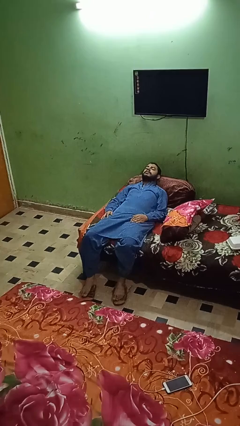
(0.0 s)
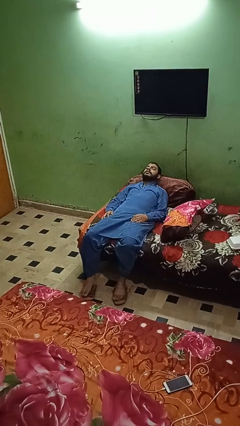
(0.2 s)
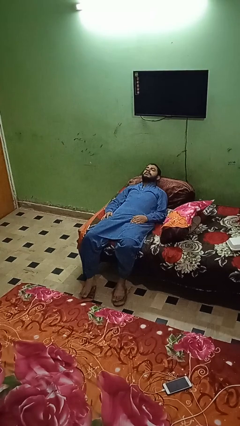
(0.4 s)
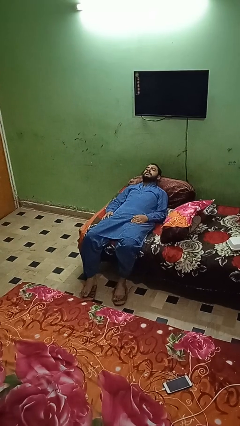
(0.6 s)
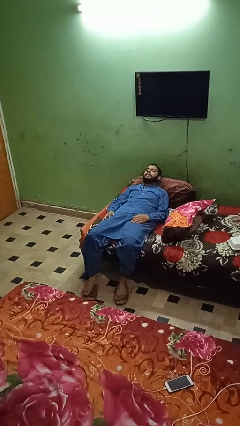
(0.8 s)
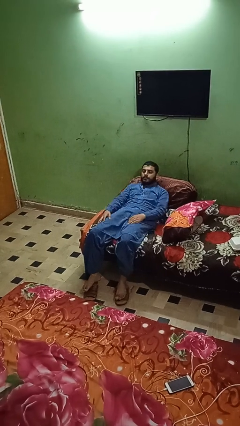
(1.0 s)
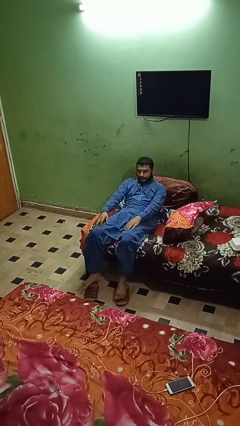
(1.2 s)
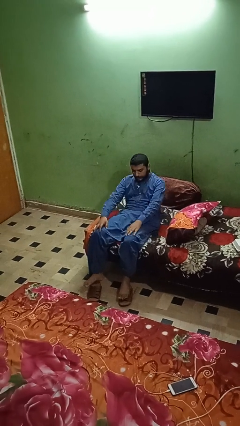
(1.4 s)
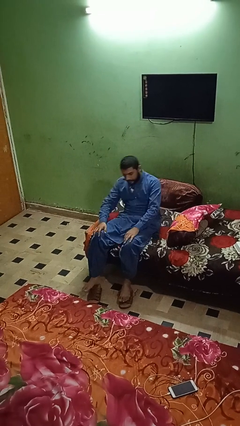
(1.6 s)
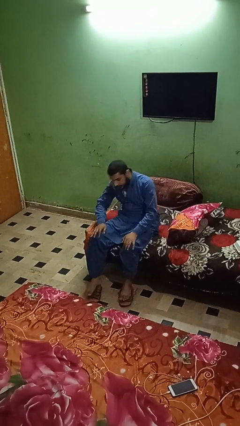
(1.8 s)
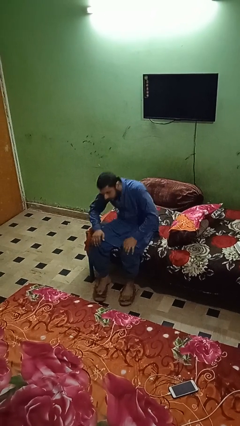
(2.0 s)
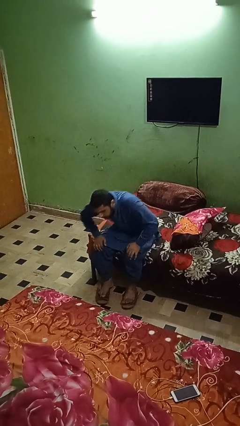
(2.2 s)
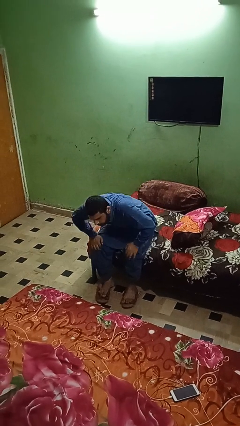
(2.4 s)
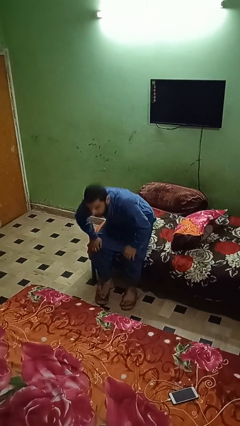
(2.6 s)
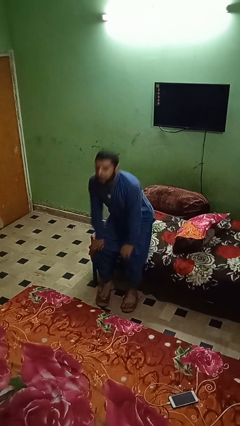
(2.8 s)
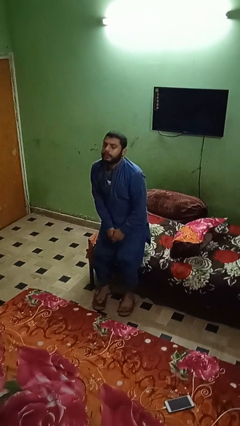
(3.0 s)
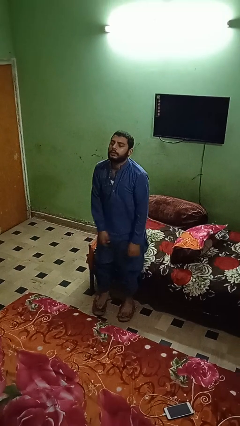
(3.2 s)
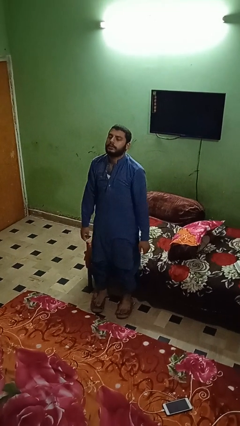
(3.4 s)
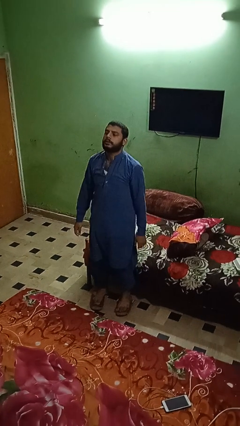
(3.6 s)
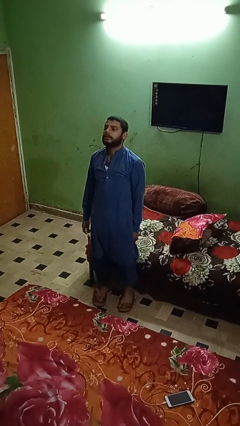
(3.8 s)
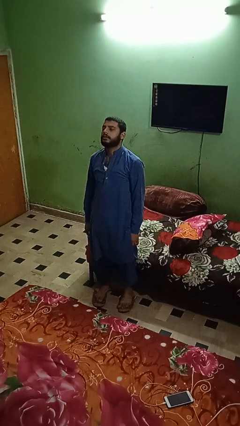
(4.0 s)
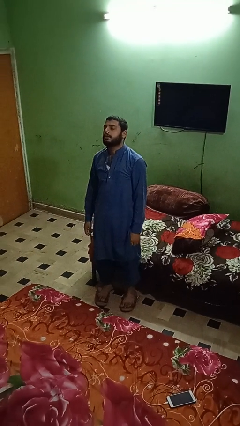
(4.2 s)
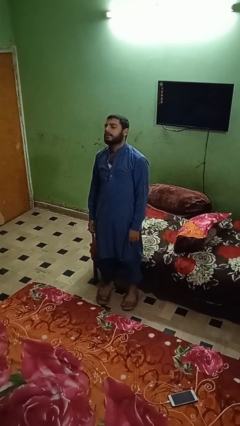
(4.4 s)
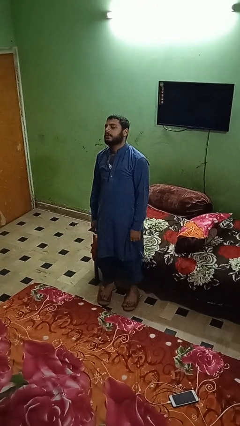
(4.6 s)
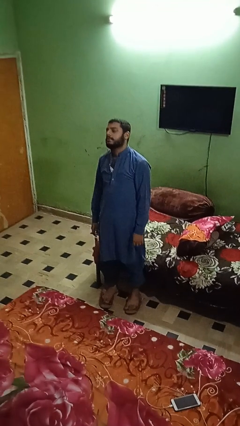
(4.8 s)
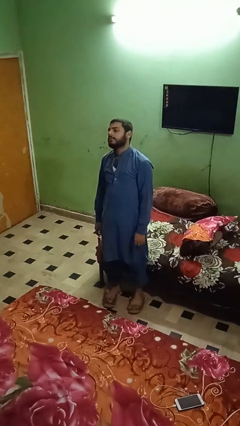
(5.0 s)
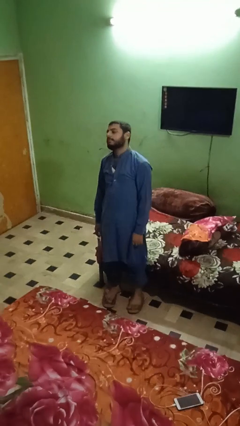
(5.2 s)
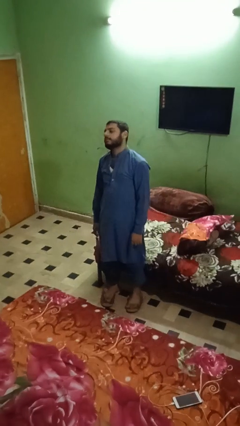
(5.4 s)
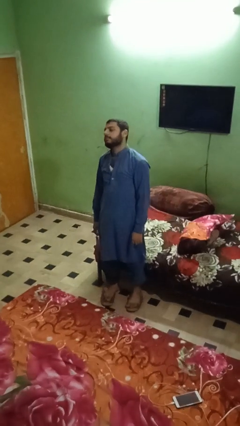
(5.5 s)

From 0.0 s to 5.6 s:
person stands up

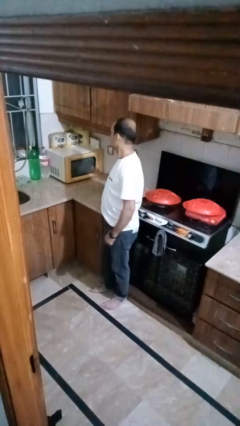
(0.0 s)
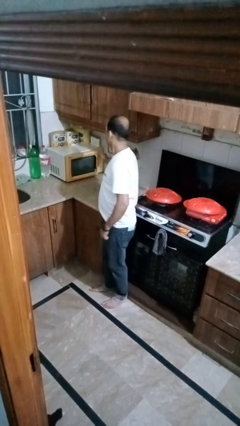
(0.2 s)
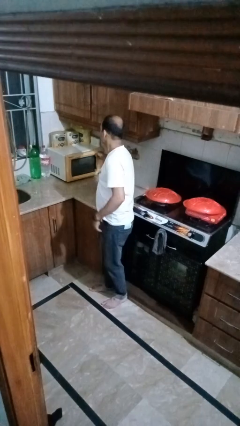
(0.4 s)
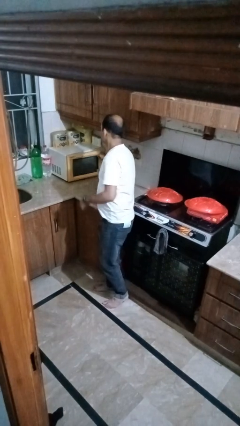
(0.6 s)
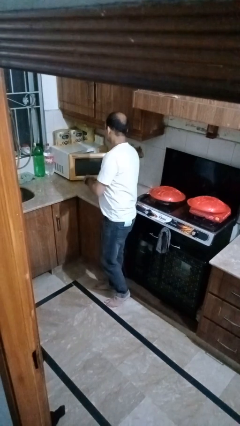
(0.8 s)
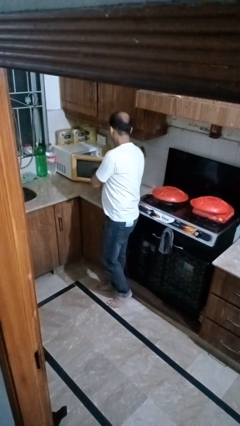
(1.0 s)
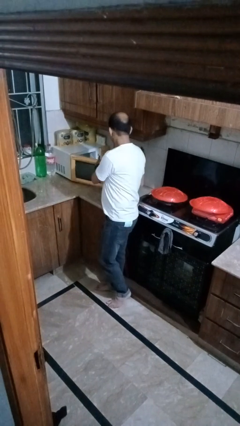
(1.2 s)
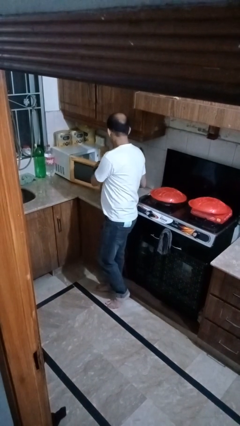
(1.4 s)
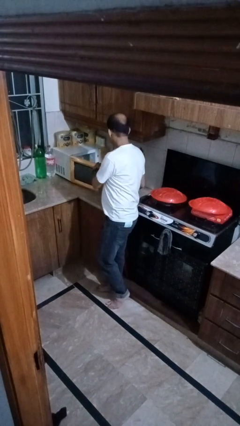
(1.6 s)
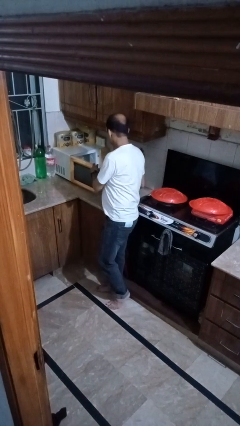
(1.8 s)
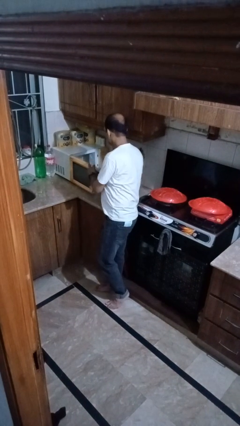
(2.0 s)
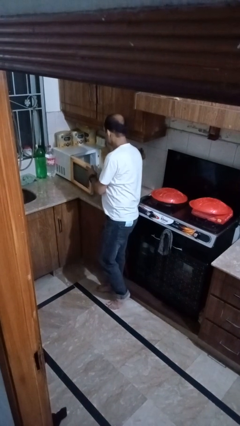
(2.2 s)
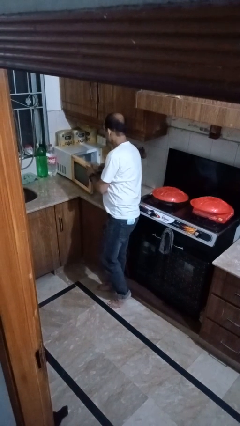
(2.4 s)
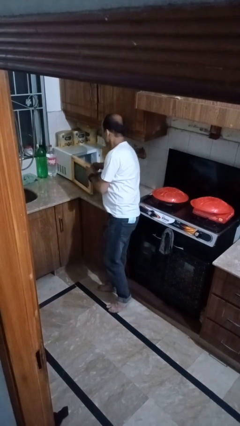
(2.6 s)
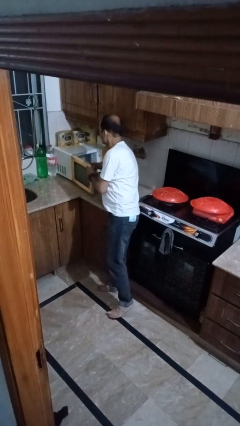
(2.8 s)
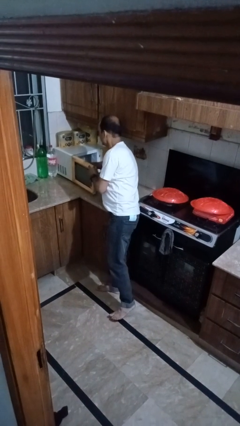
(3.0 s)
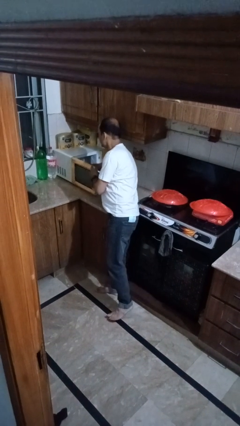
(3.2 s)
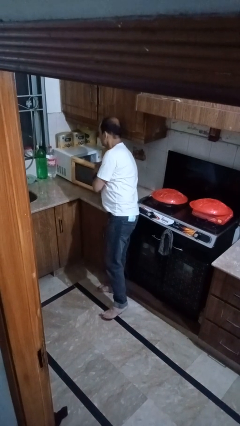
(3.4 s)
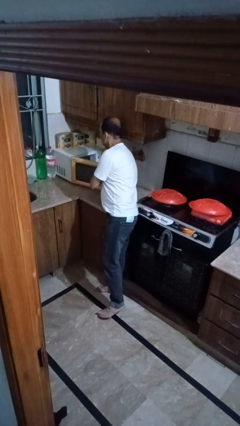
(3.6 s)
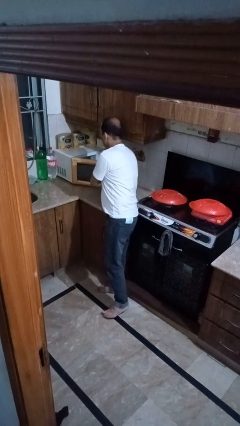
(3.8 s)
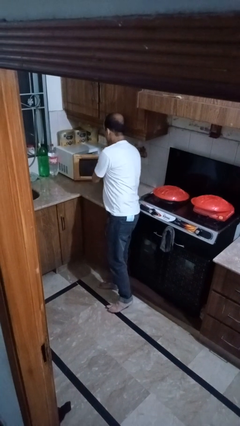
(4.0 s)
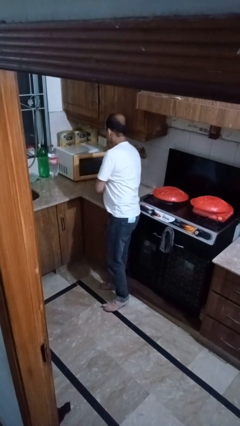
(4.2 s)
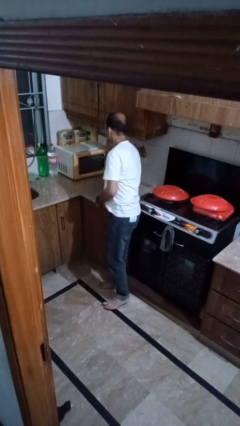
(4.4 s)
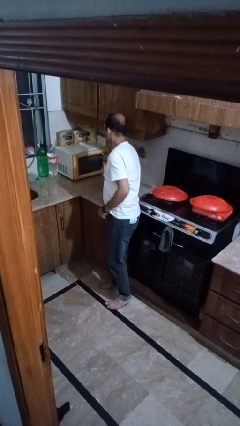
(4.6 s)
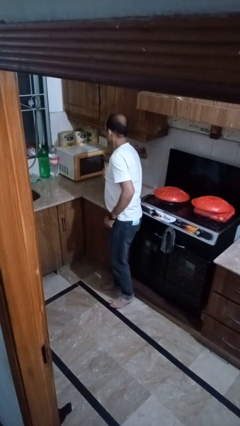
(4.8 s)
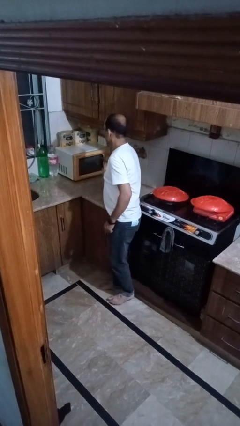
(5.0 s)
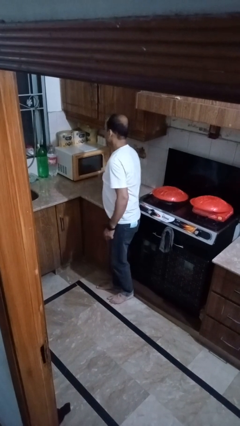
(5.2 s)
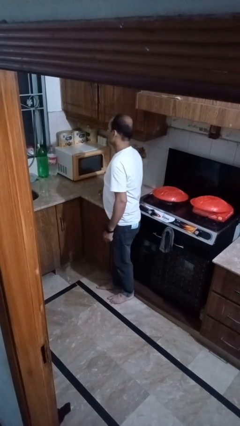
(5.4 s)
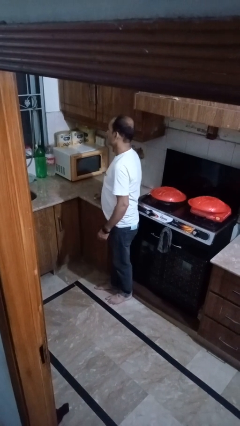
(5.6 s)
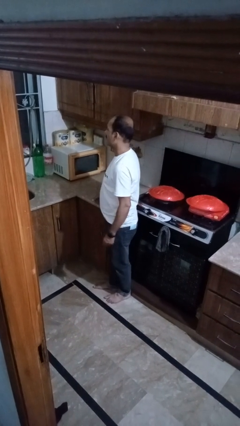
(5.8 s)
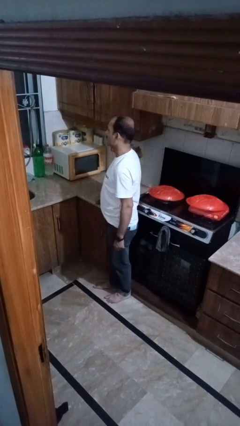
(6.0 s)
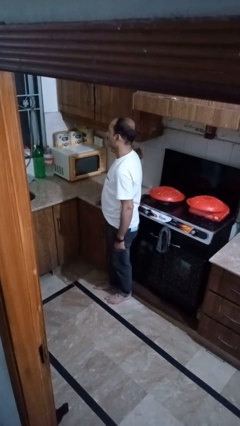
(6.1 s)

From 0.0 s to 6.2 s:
person puts object into microwave

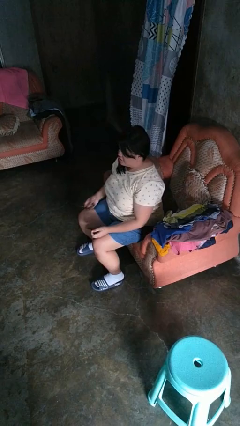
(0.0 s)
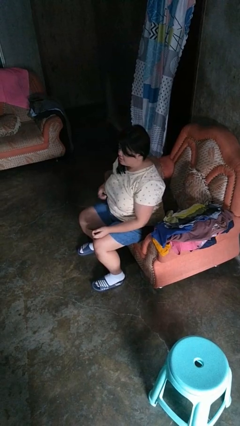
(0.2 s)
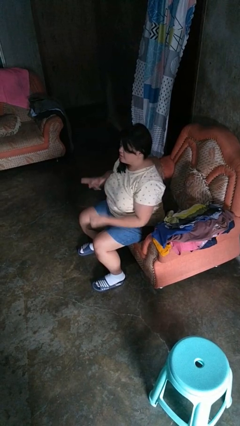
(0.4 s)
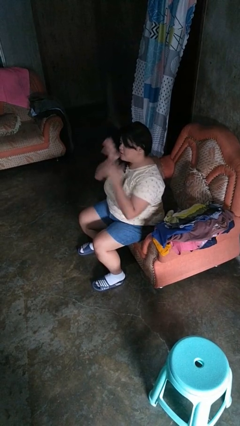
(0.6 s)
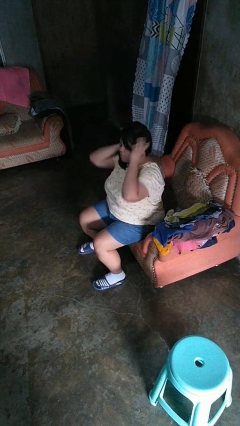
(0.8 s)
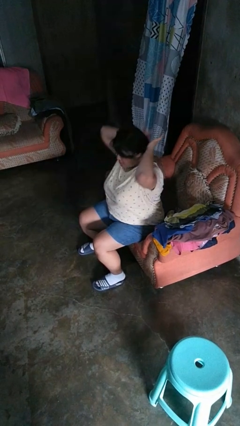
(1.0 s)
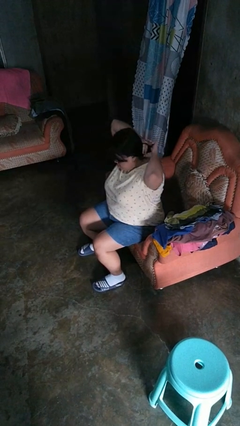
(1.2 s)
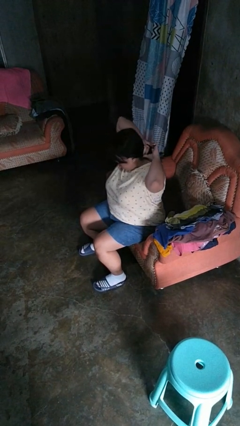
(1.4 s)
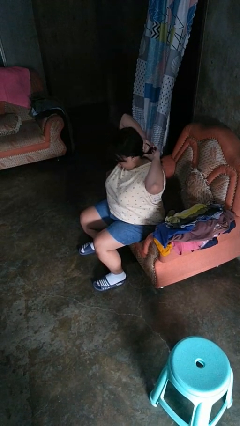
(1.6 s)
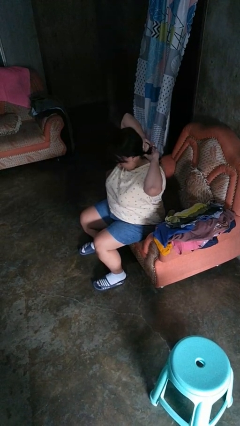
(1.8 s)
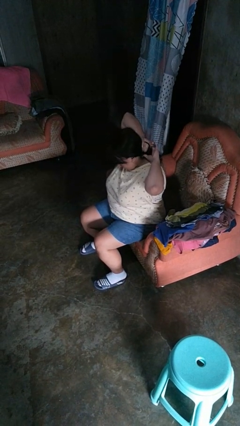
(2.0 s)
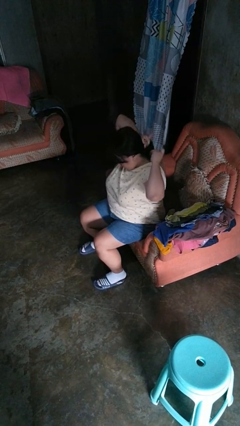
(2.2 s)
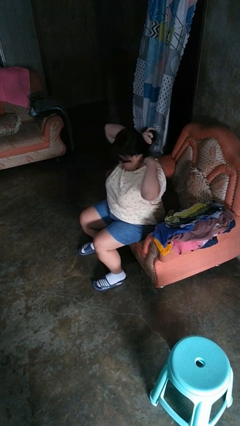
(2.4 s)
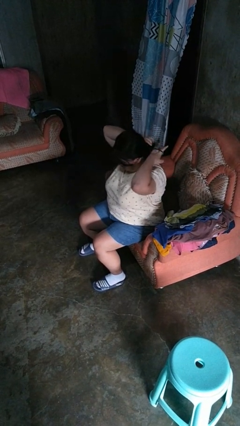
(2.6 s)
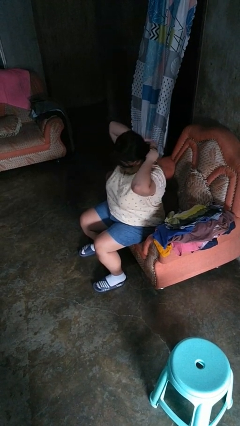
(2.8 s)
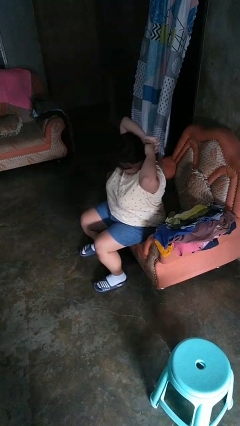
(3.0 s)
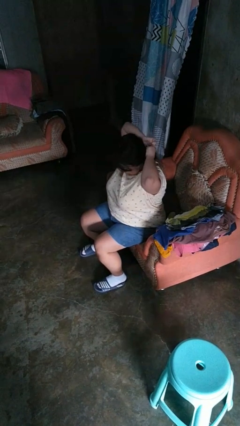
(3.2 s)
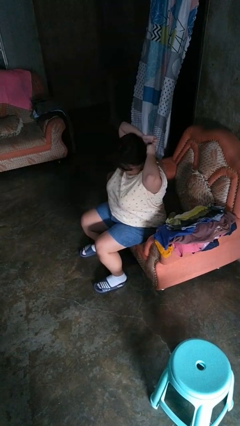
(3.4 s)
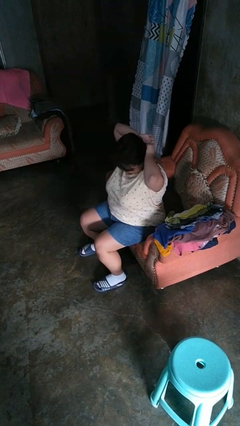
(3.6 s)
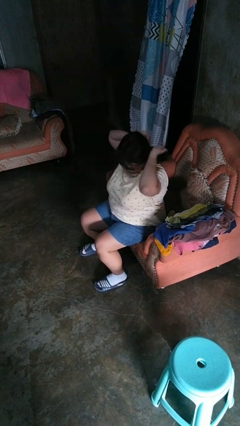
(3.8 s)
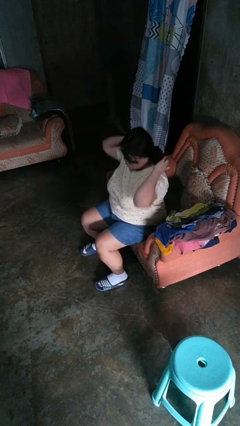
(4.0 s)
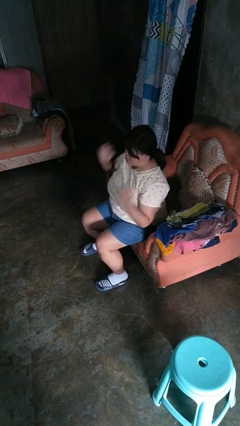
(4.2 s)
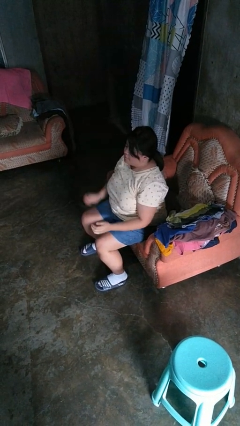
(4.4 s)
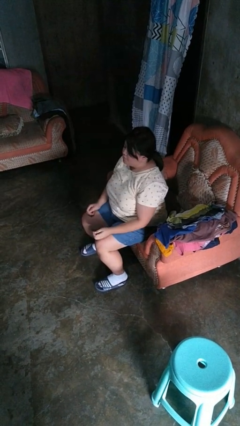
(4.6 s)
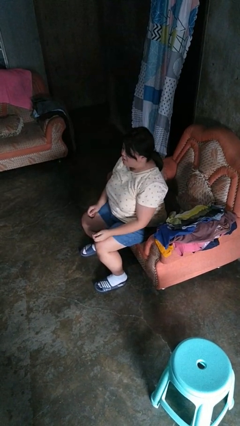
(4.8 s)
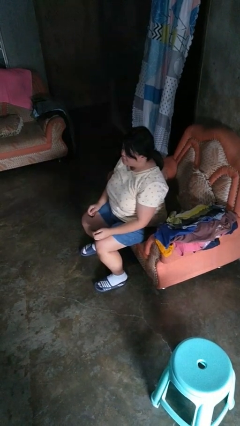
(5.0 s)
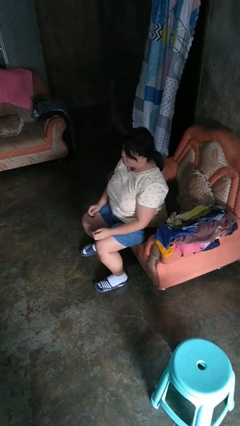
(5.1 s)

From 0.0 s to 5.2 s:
person puts hair in ponytail

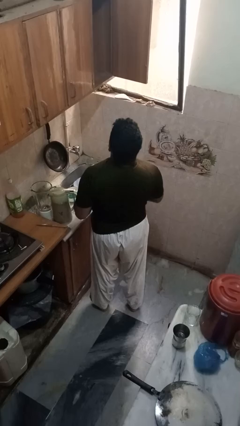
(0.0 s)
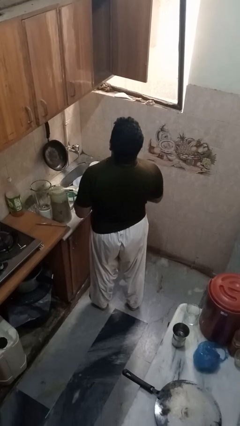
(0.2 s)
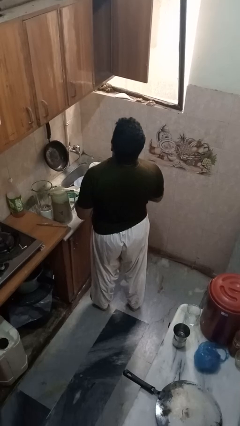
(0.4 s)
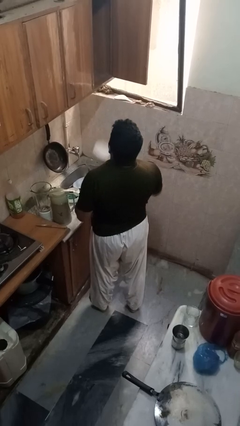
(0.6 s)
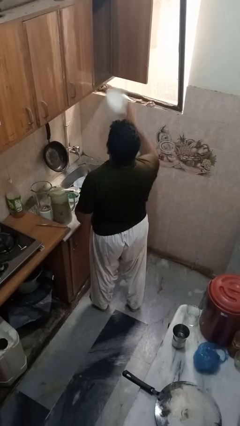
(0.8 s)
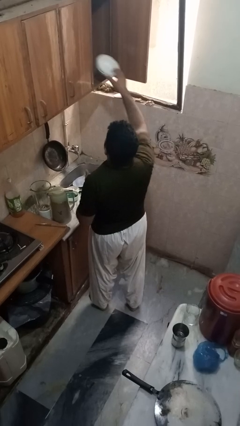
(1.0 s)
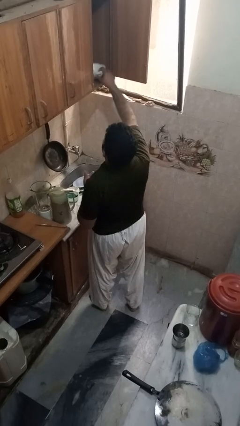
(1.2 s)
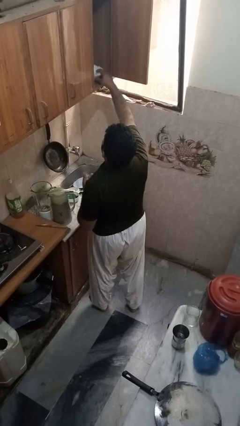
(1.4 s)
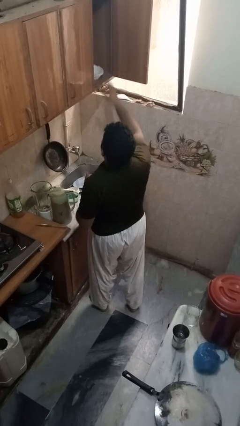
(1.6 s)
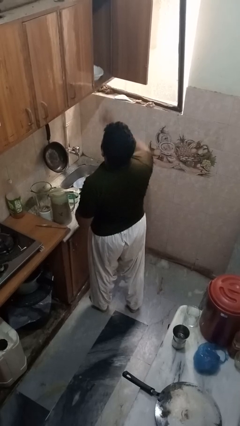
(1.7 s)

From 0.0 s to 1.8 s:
person puts object in cabinet
